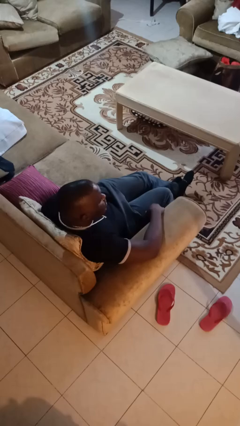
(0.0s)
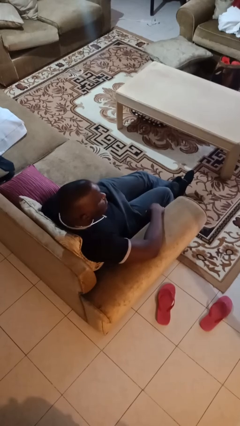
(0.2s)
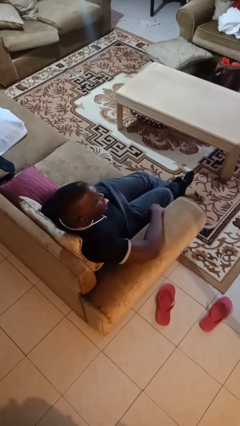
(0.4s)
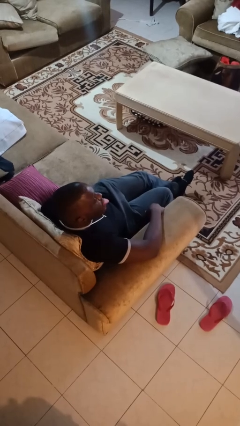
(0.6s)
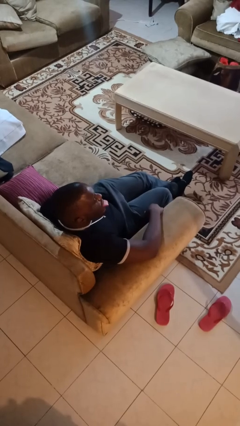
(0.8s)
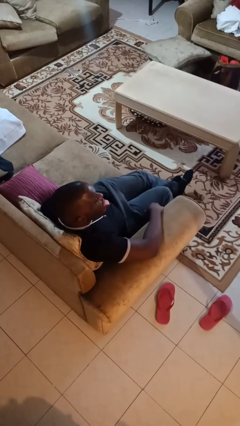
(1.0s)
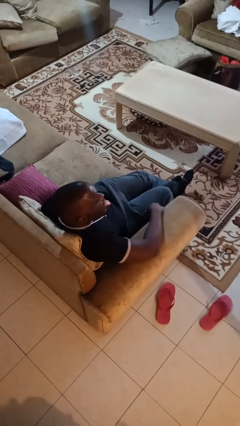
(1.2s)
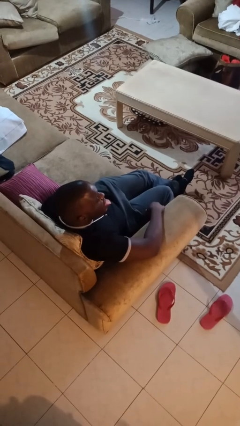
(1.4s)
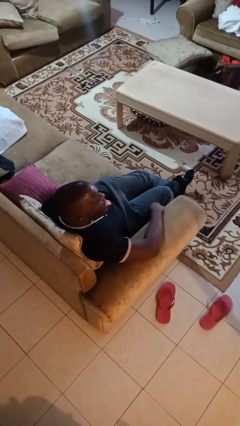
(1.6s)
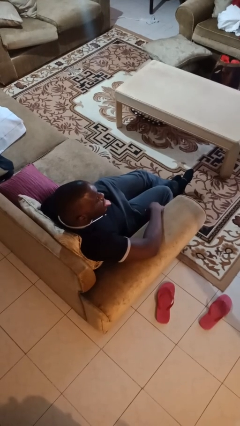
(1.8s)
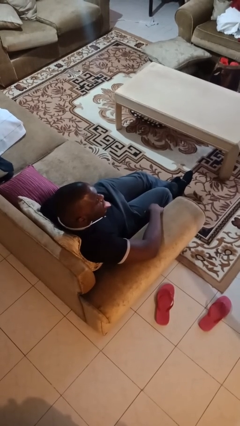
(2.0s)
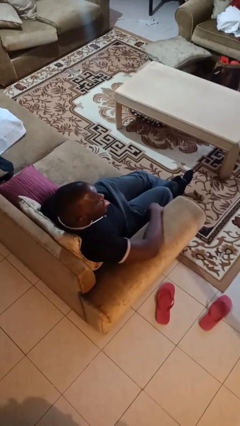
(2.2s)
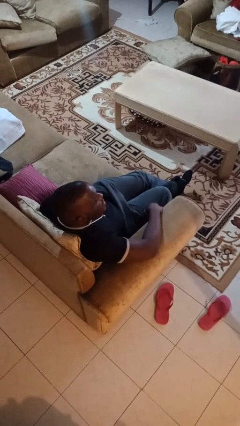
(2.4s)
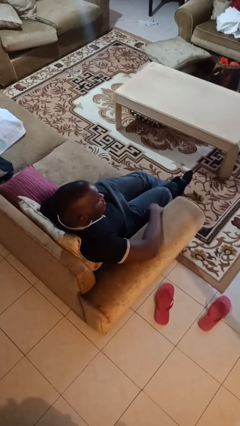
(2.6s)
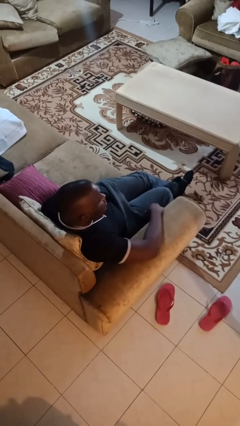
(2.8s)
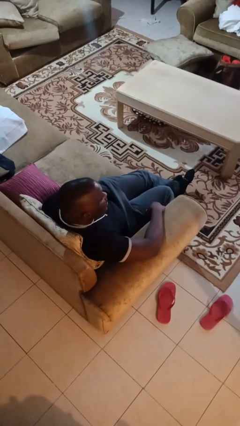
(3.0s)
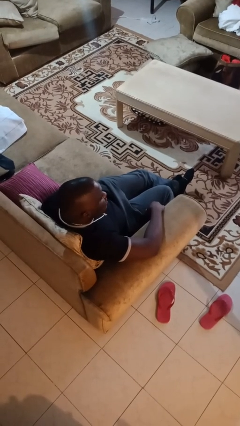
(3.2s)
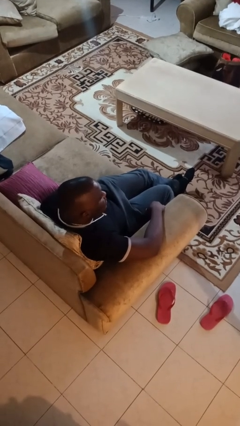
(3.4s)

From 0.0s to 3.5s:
person sticks out tongue

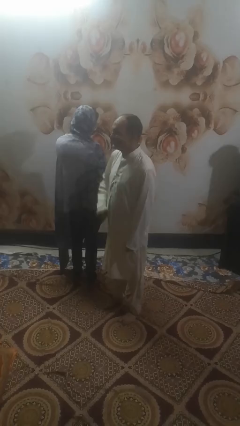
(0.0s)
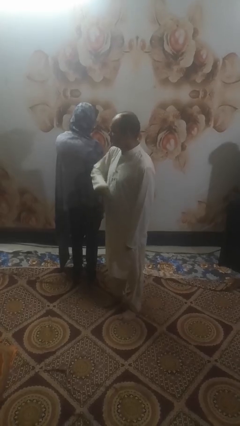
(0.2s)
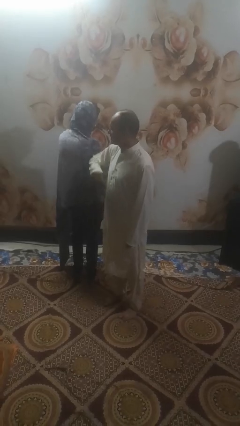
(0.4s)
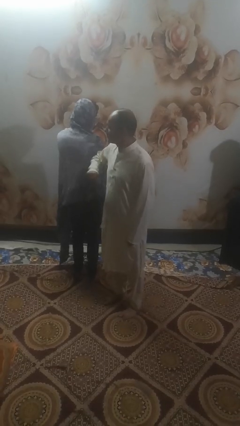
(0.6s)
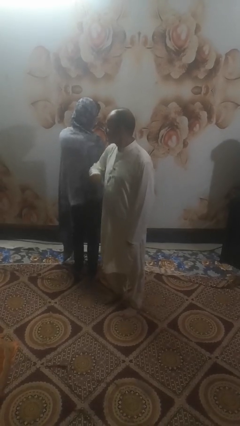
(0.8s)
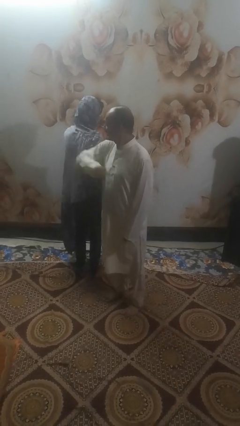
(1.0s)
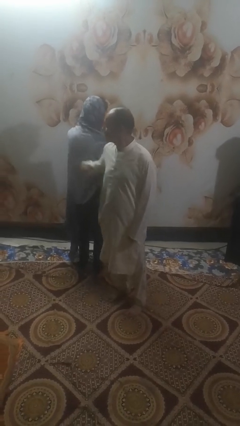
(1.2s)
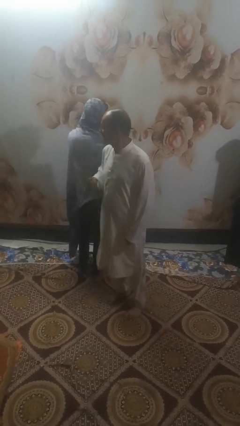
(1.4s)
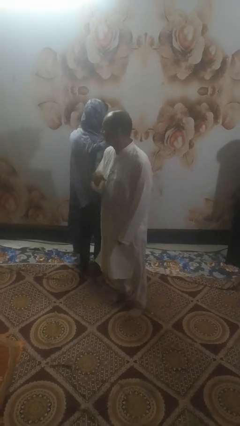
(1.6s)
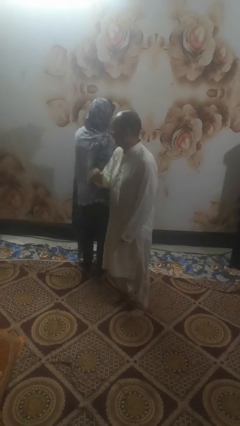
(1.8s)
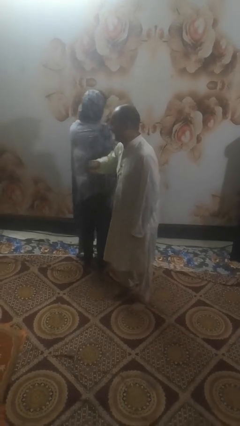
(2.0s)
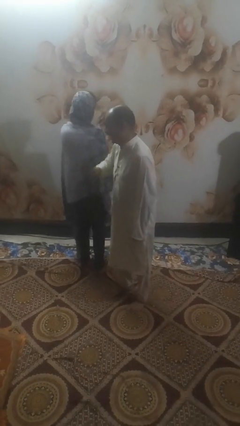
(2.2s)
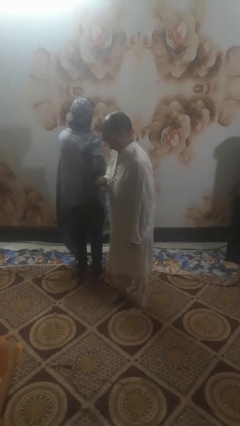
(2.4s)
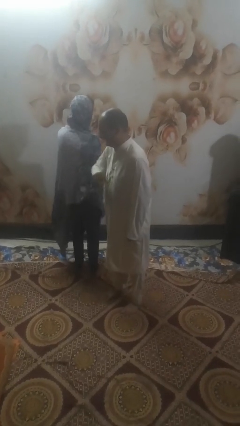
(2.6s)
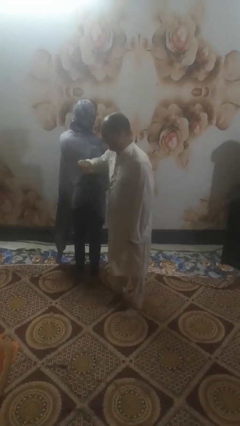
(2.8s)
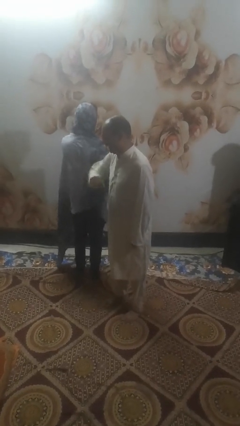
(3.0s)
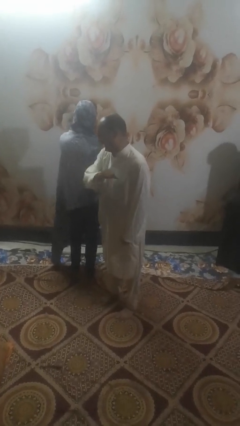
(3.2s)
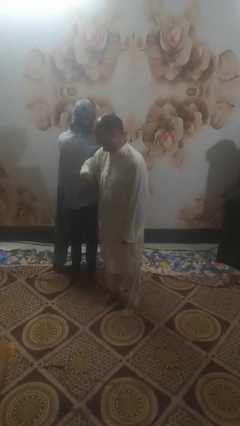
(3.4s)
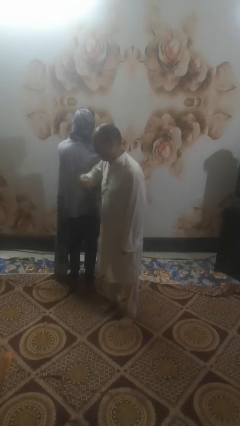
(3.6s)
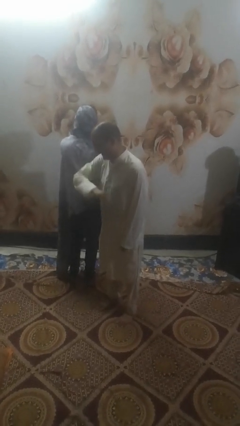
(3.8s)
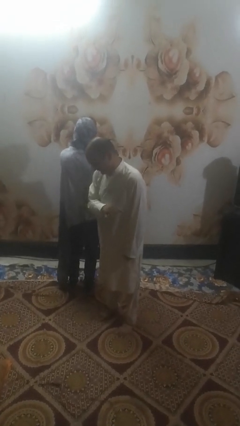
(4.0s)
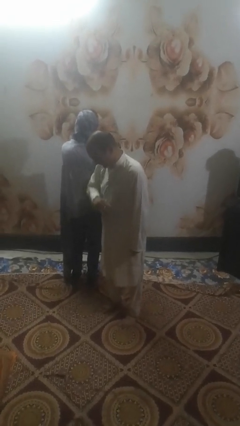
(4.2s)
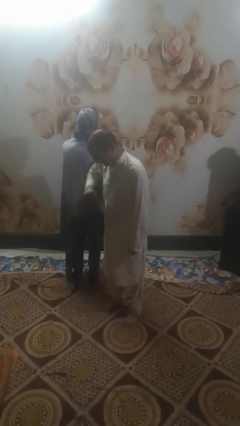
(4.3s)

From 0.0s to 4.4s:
person nudges person with elbow

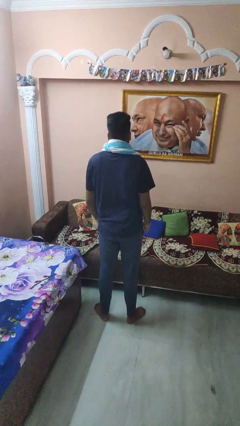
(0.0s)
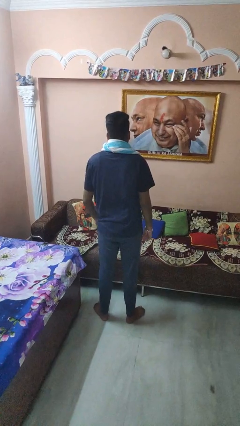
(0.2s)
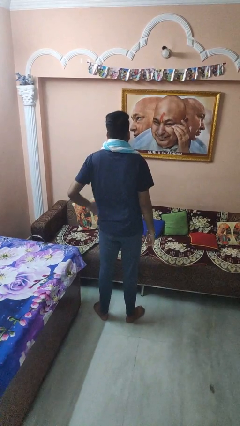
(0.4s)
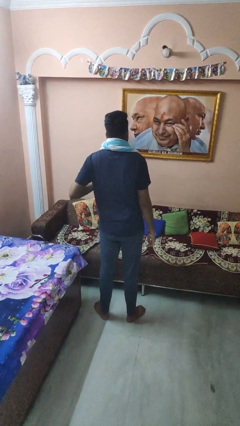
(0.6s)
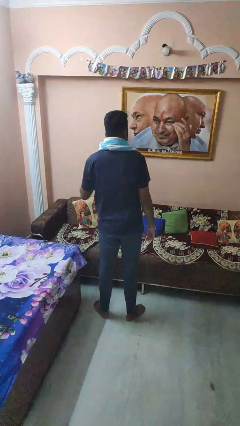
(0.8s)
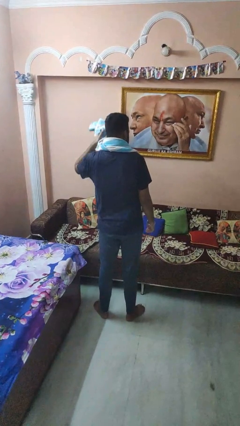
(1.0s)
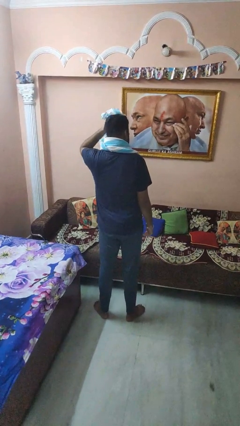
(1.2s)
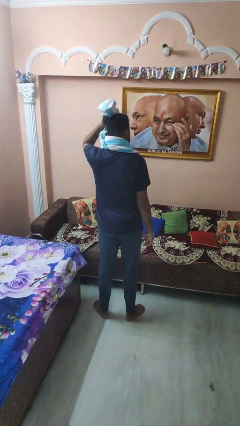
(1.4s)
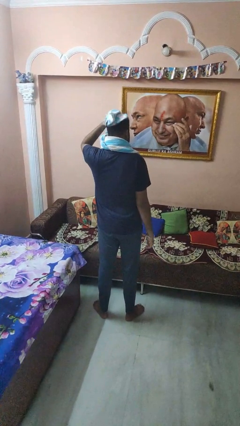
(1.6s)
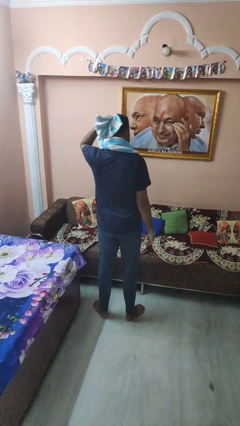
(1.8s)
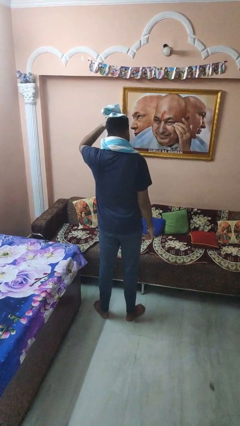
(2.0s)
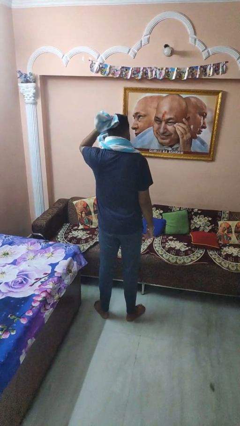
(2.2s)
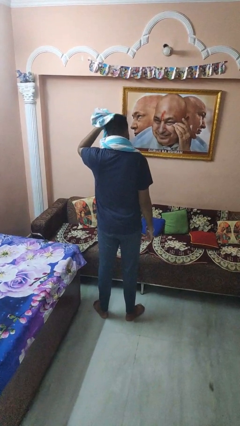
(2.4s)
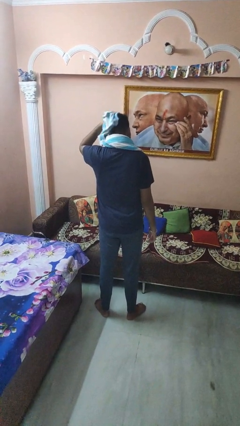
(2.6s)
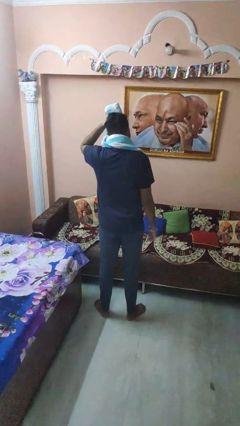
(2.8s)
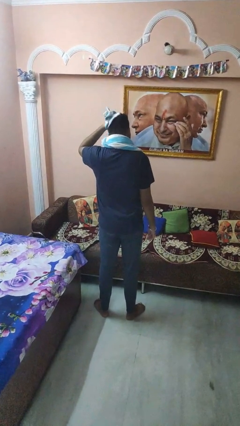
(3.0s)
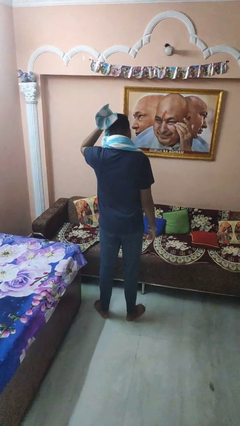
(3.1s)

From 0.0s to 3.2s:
person dries hair with towel

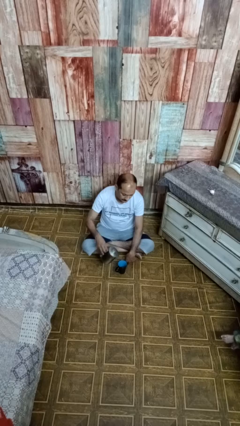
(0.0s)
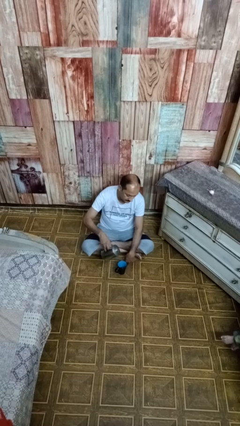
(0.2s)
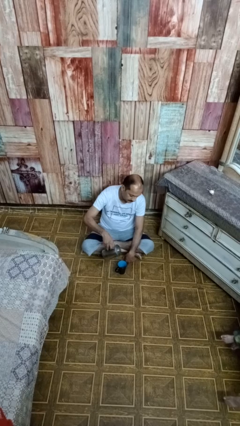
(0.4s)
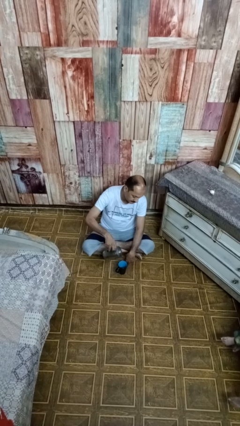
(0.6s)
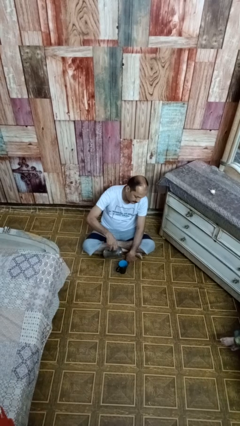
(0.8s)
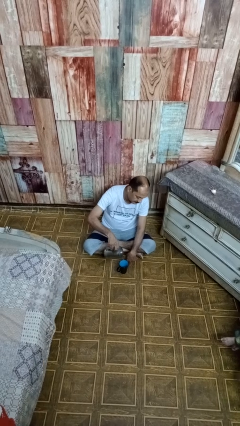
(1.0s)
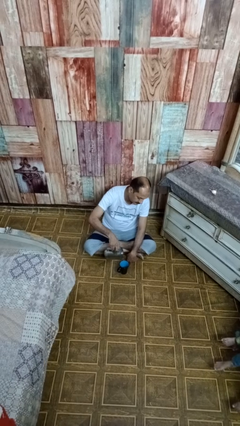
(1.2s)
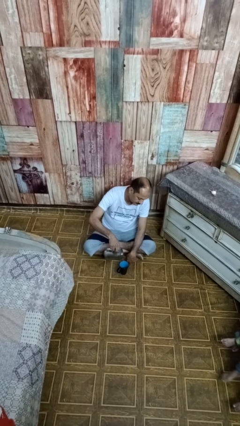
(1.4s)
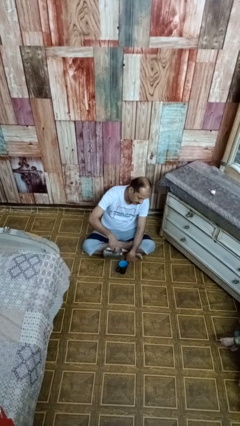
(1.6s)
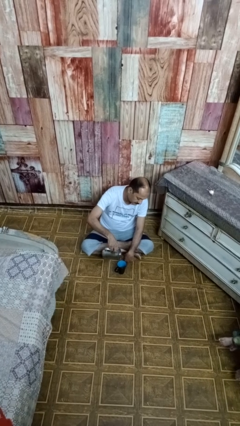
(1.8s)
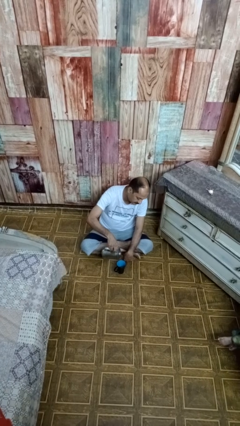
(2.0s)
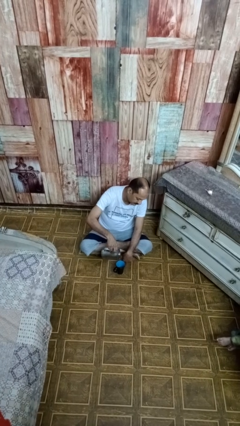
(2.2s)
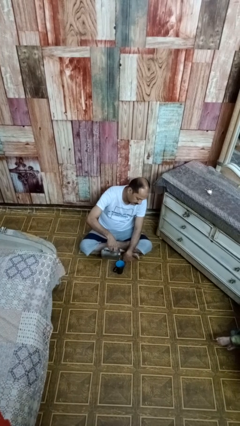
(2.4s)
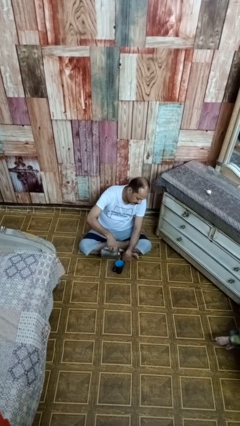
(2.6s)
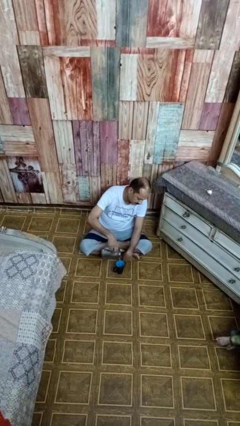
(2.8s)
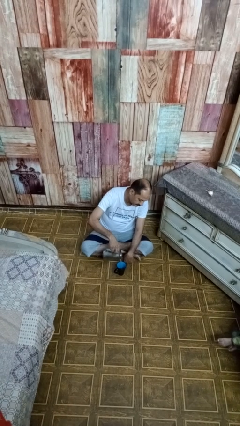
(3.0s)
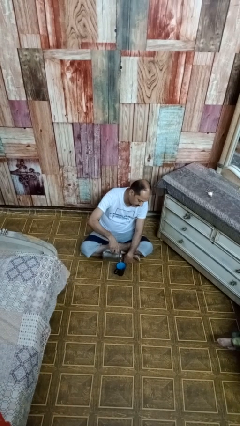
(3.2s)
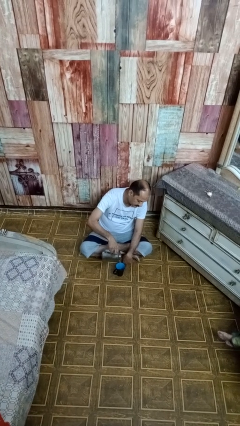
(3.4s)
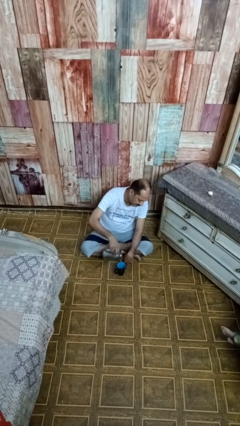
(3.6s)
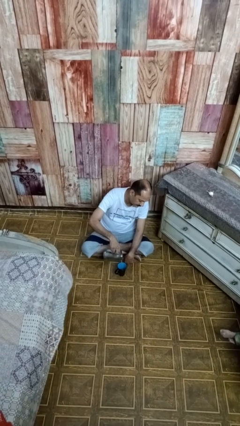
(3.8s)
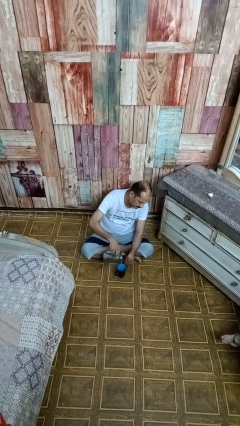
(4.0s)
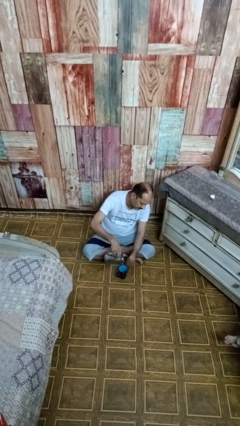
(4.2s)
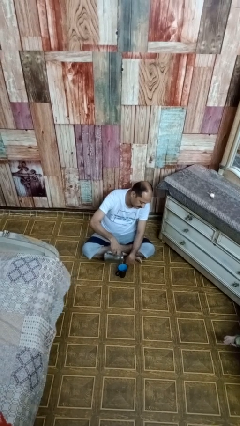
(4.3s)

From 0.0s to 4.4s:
person pours coffee into mug

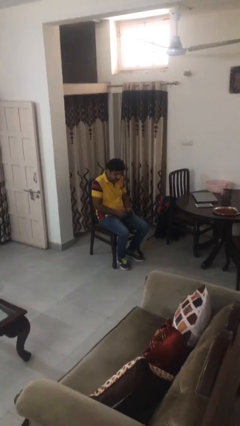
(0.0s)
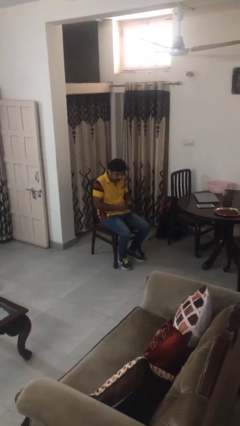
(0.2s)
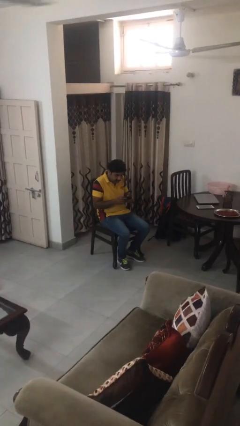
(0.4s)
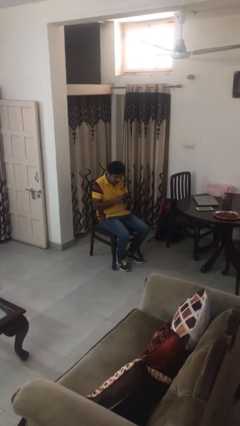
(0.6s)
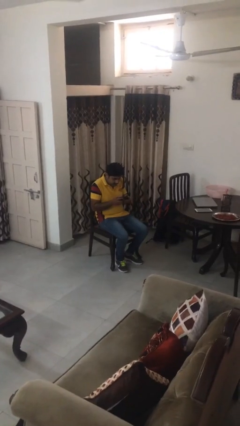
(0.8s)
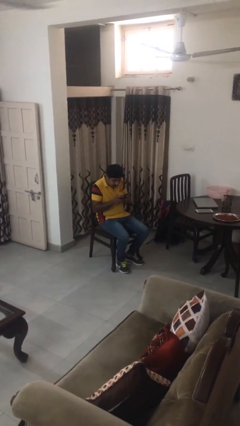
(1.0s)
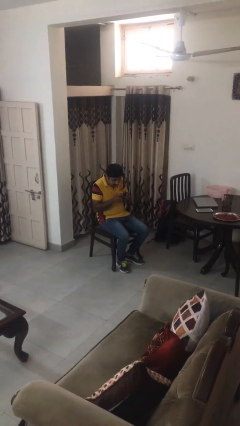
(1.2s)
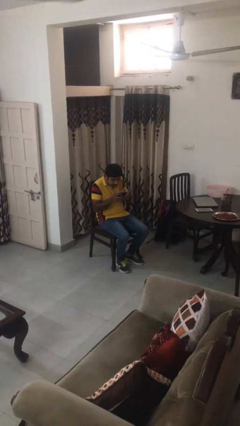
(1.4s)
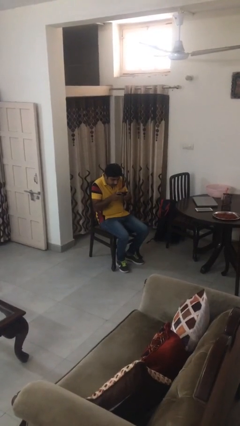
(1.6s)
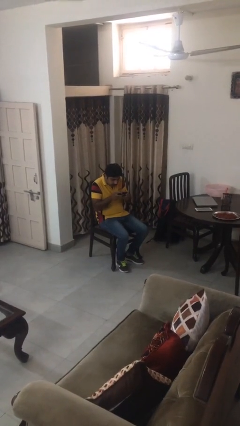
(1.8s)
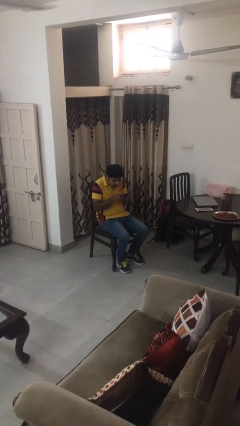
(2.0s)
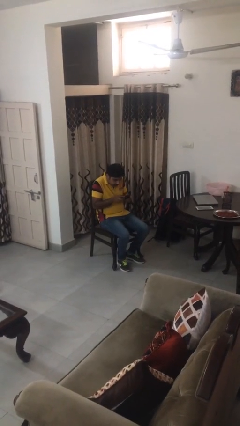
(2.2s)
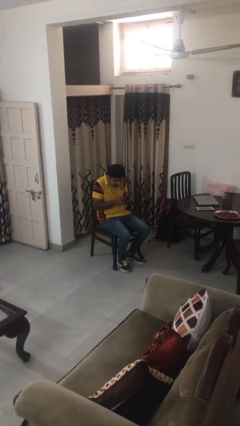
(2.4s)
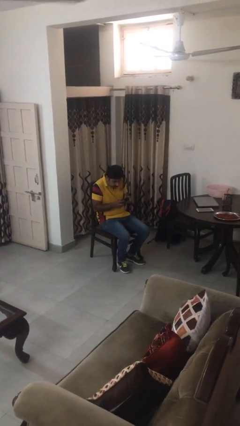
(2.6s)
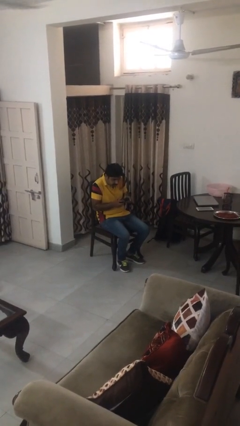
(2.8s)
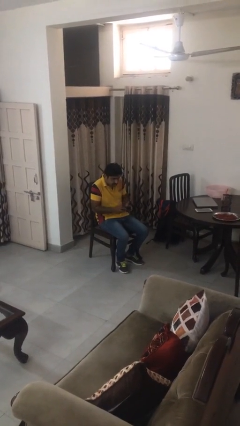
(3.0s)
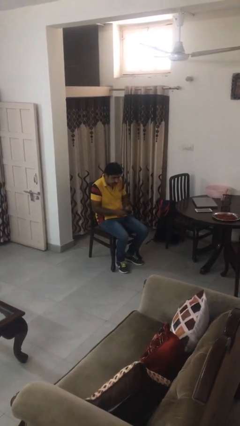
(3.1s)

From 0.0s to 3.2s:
person interacts with handheld game
